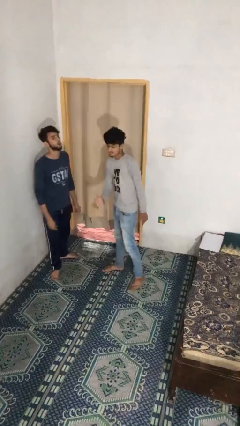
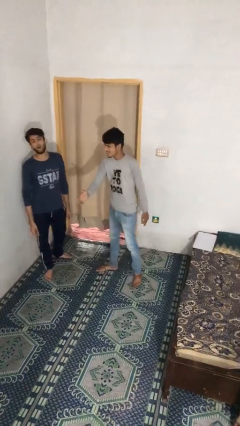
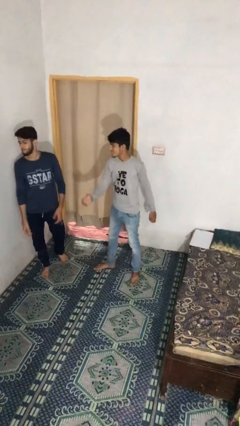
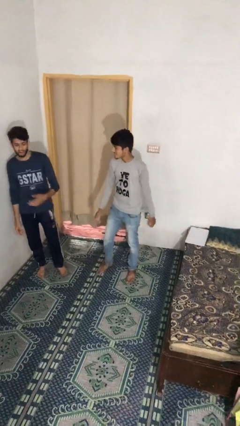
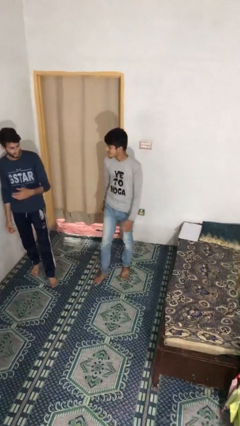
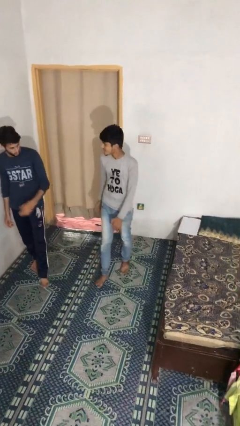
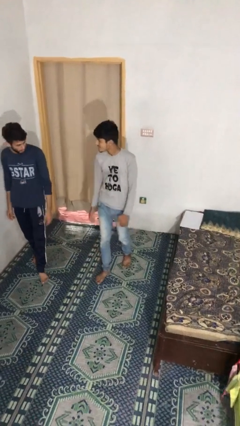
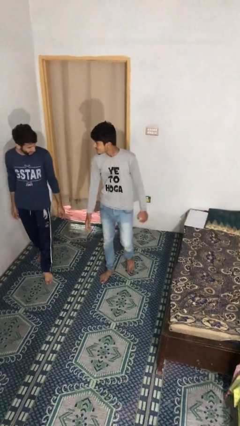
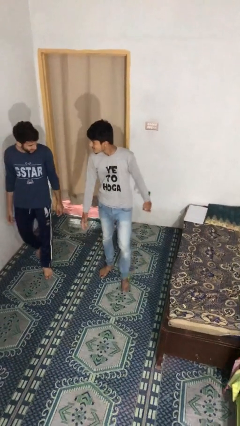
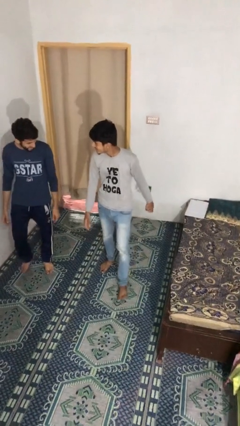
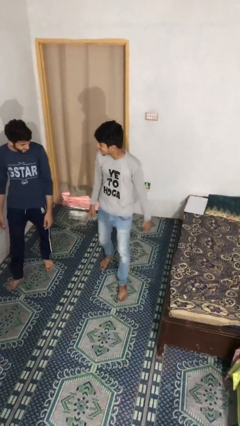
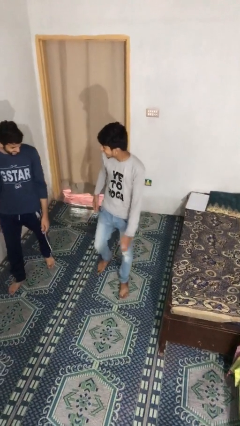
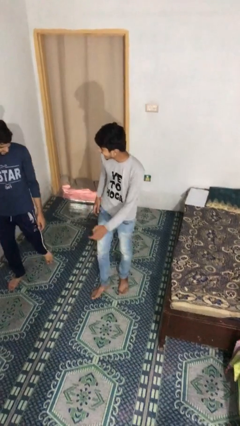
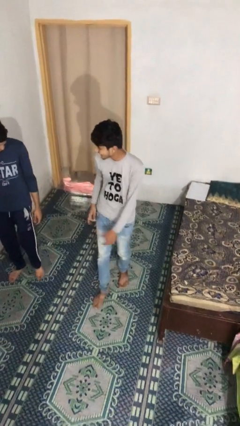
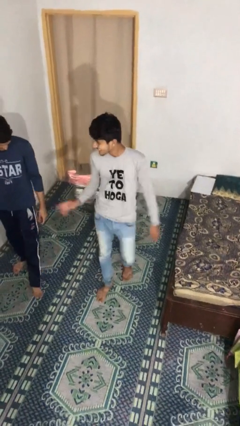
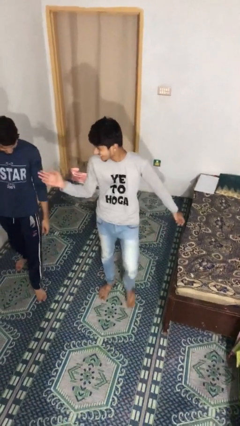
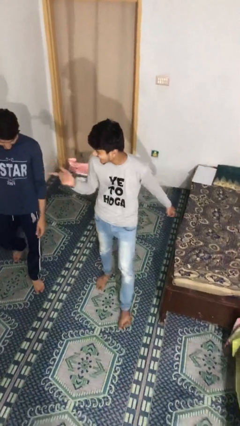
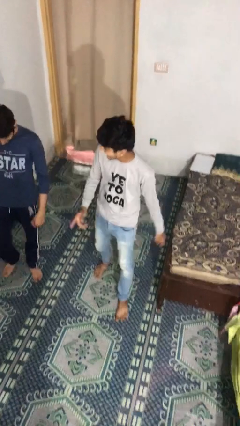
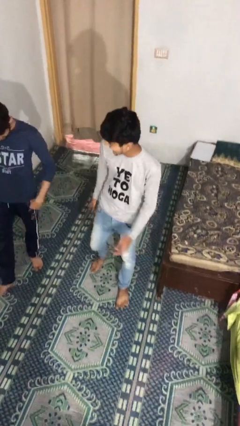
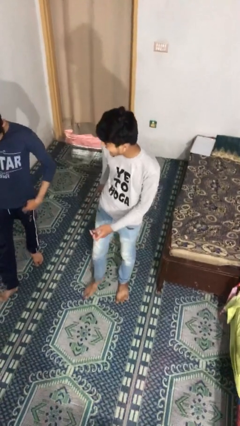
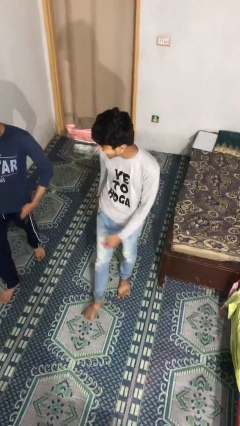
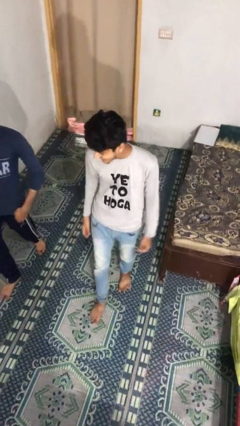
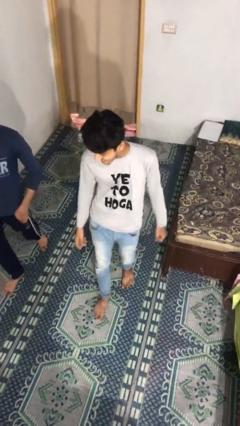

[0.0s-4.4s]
person talks to person

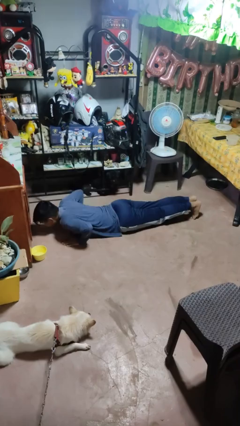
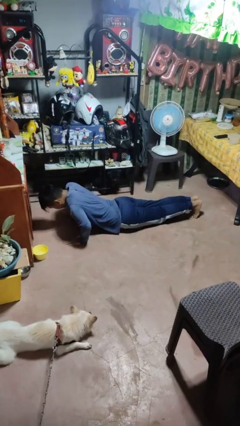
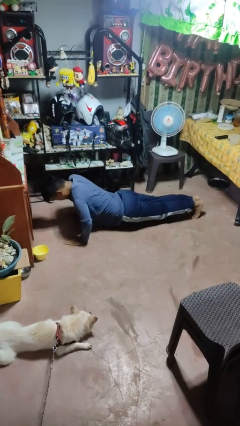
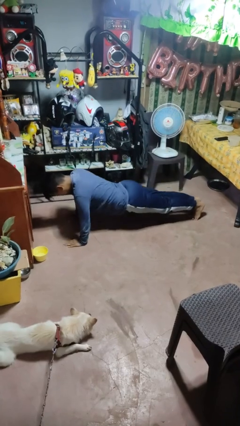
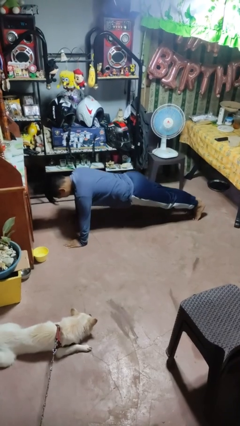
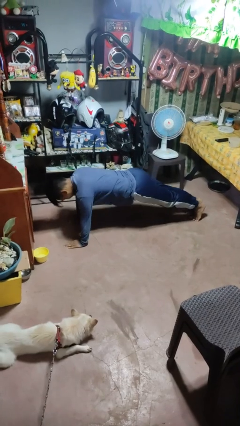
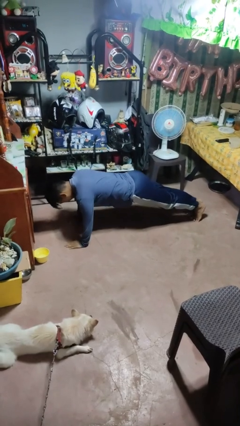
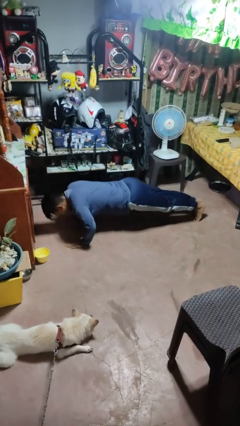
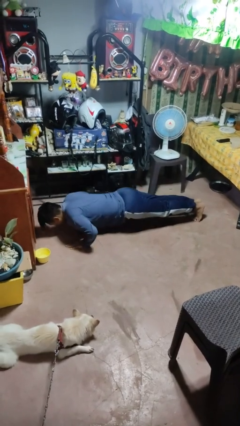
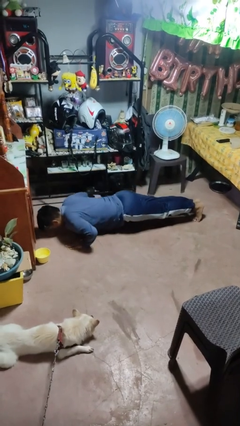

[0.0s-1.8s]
person exercises with pushup

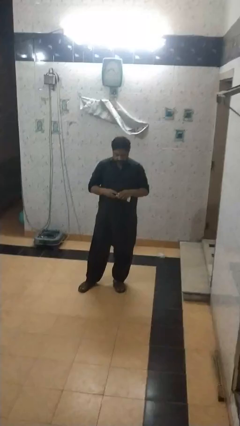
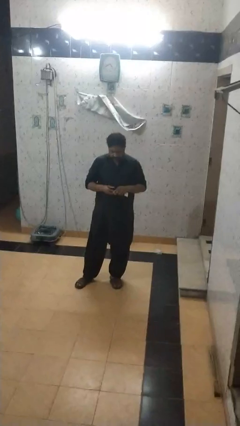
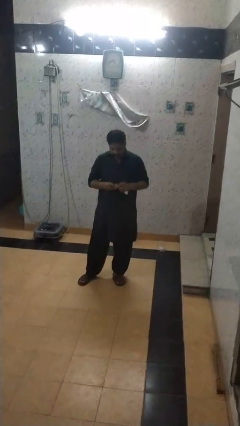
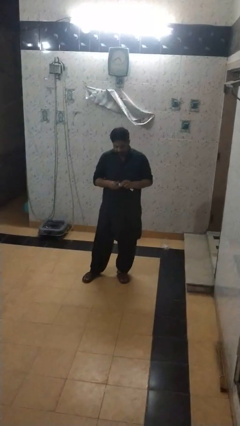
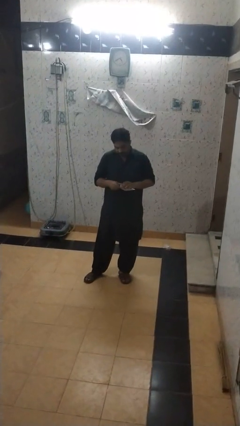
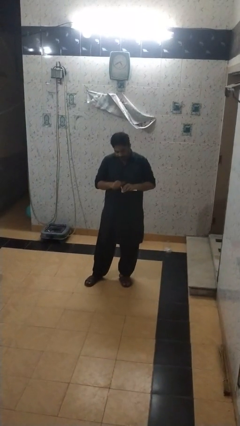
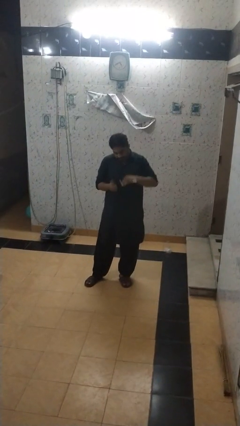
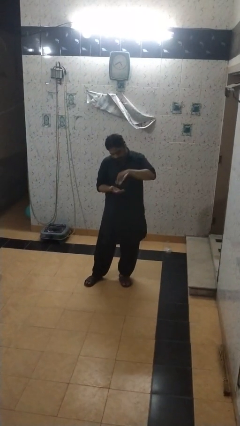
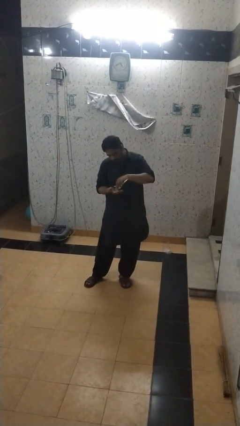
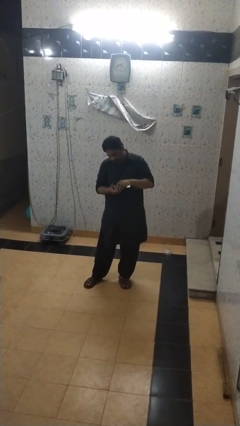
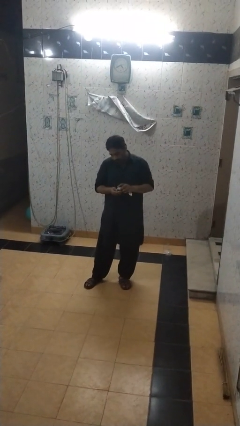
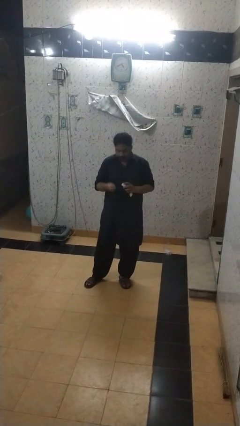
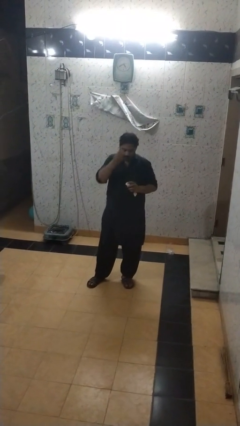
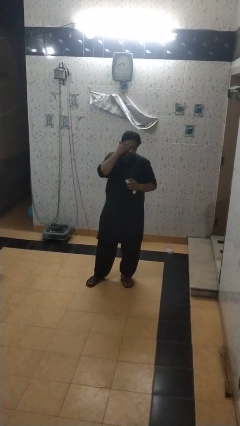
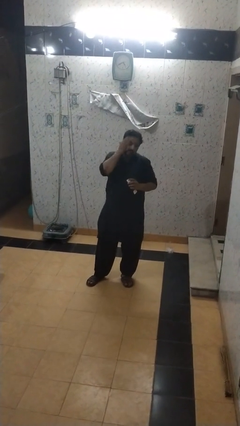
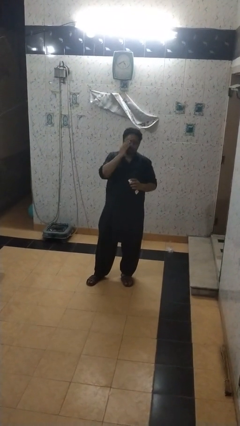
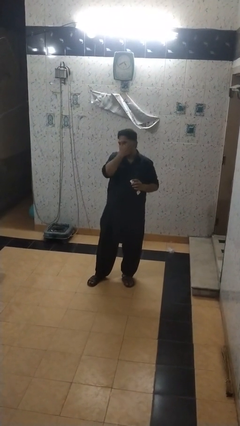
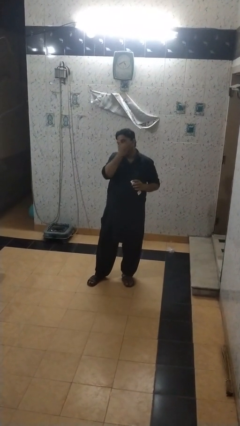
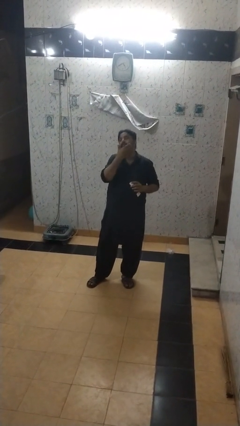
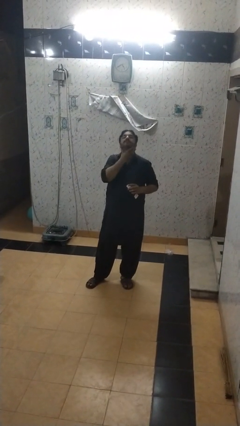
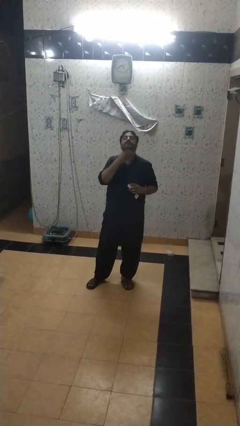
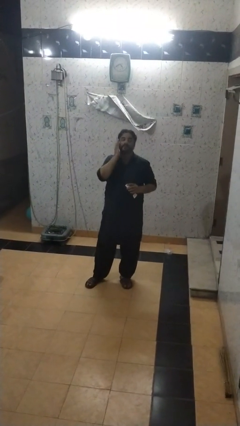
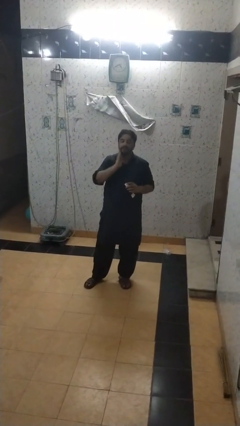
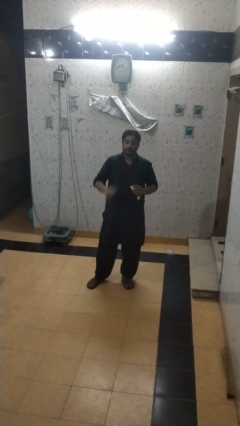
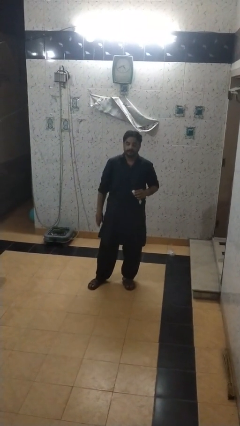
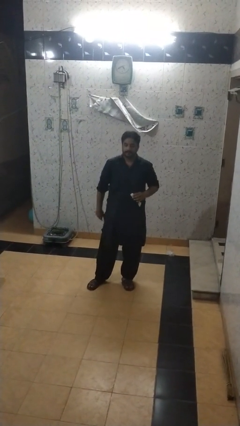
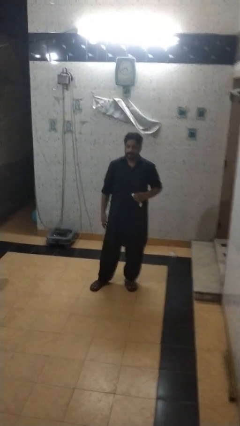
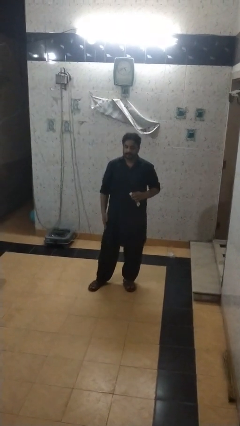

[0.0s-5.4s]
person applies facial moisturizer

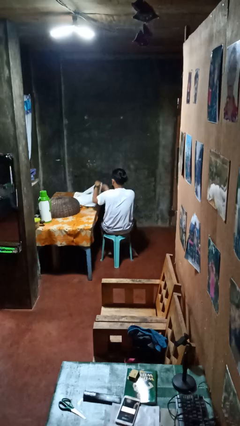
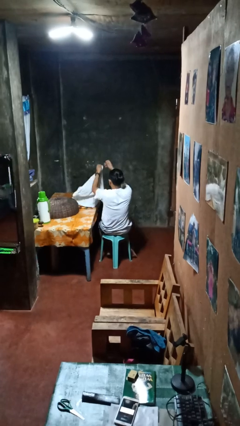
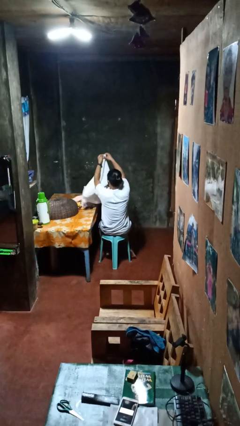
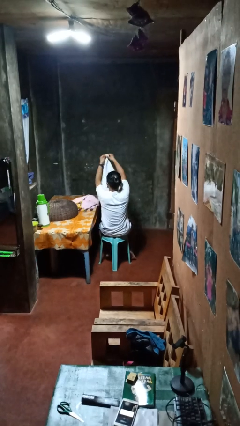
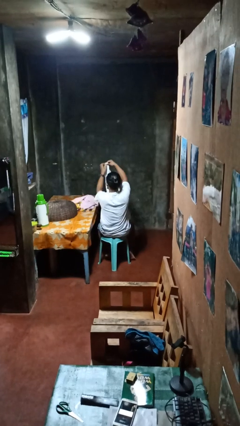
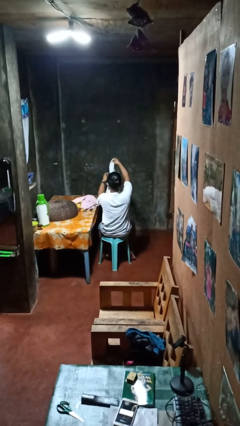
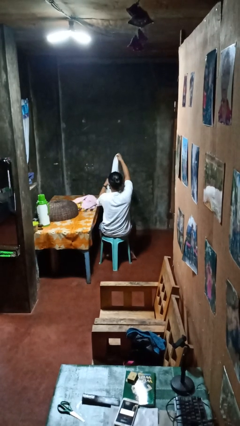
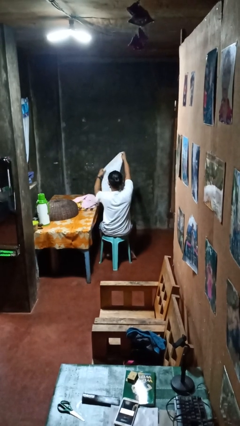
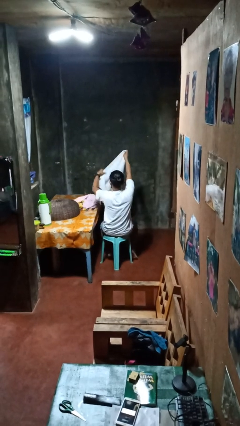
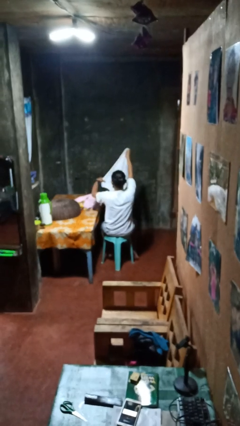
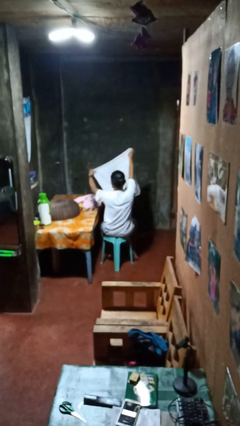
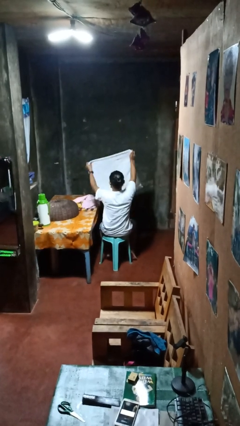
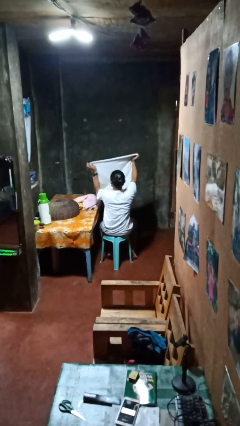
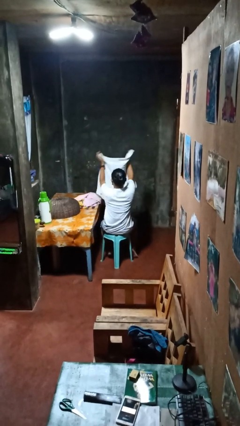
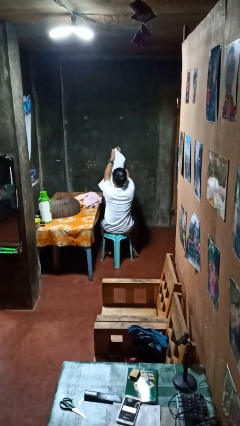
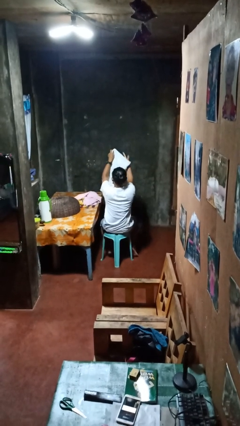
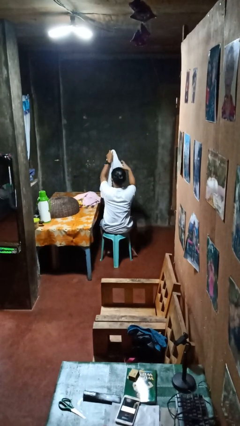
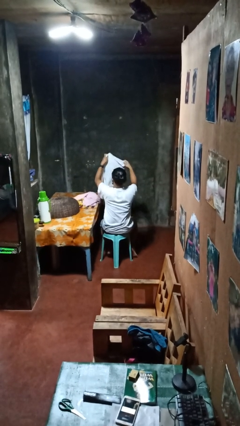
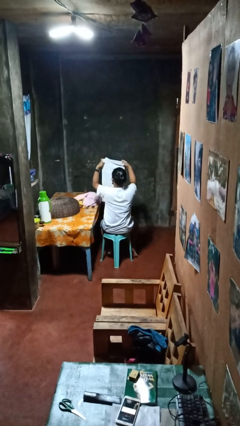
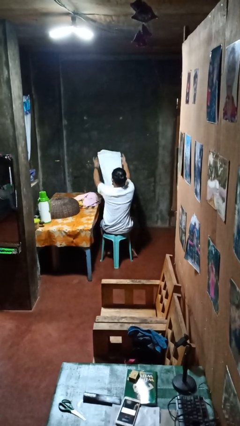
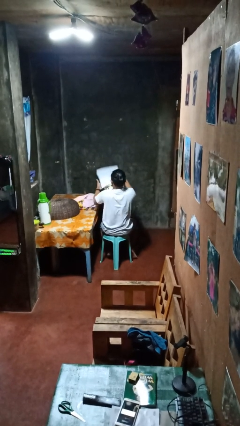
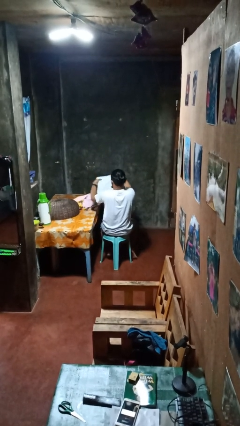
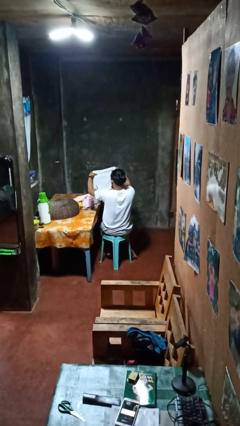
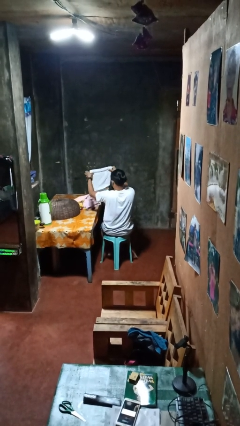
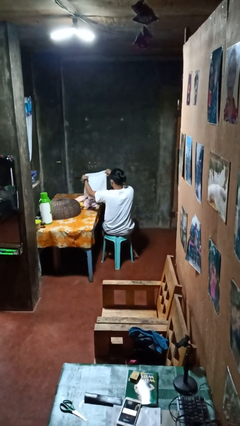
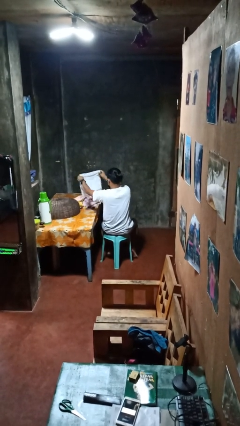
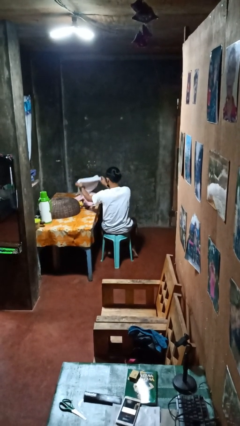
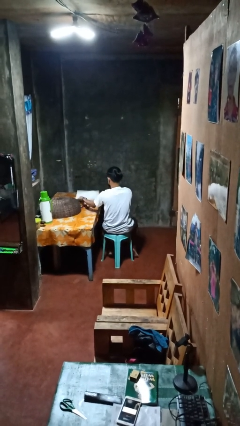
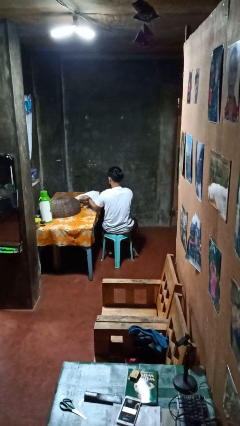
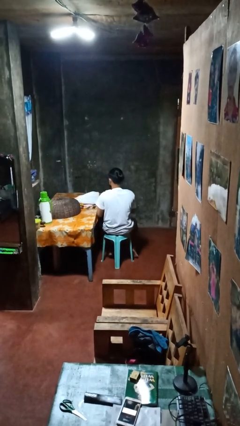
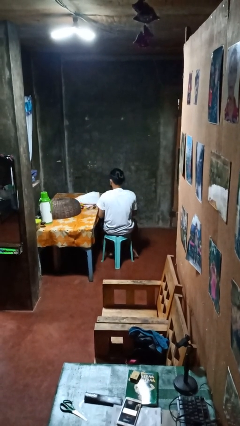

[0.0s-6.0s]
person folds towel

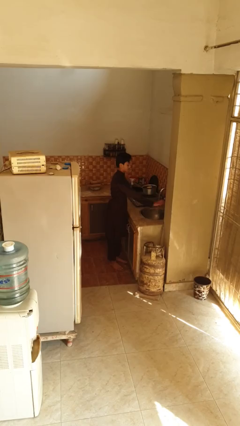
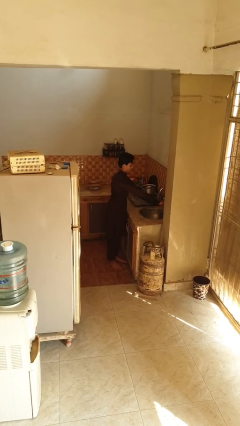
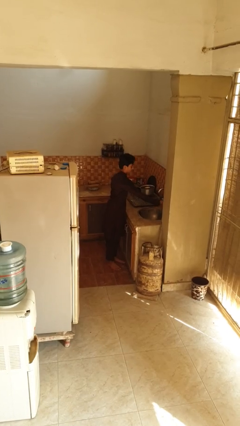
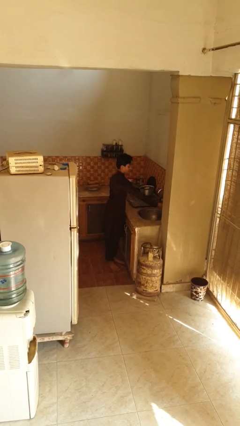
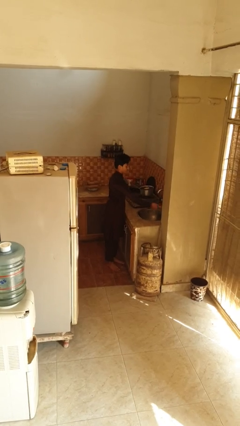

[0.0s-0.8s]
person turns off faucet
